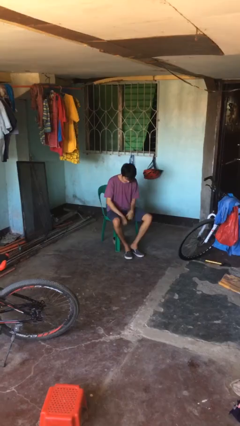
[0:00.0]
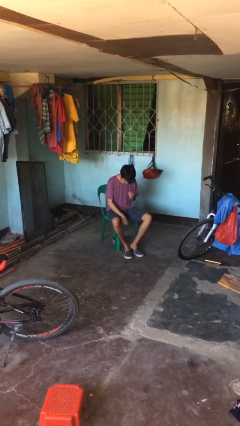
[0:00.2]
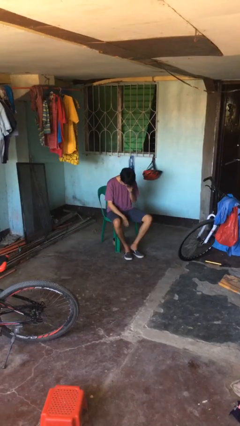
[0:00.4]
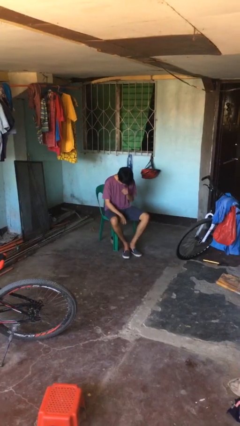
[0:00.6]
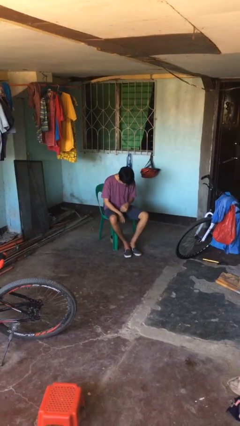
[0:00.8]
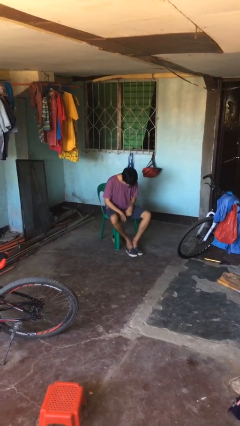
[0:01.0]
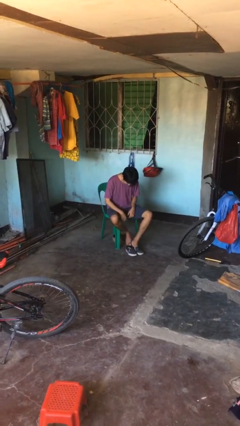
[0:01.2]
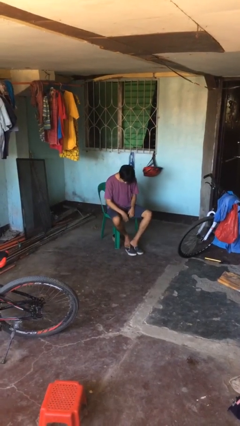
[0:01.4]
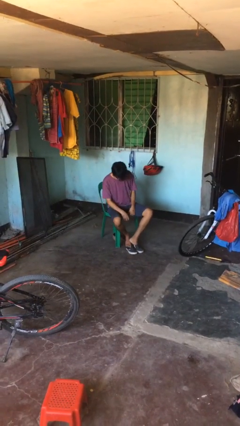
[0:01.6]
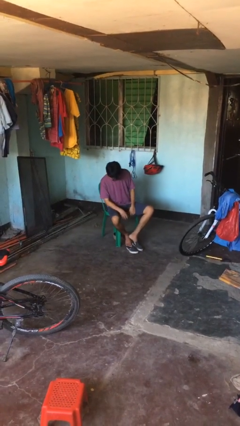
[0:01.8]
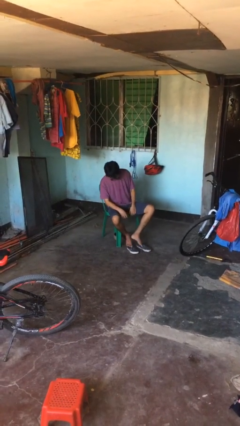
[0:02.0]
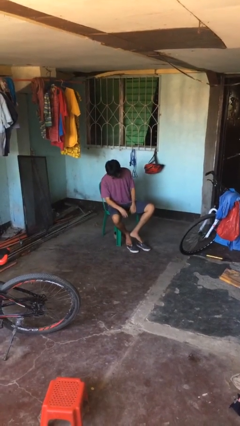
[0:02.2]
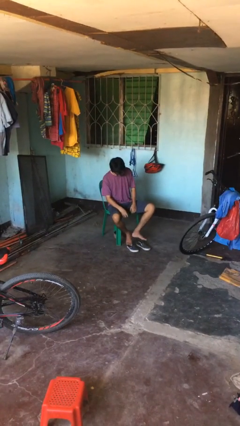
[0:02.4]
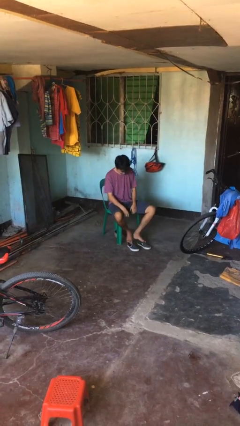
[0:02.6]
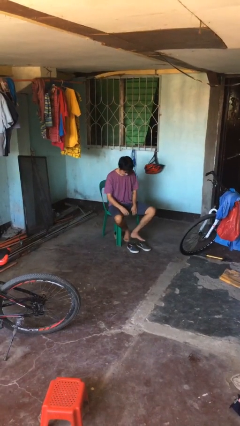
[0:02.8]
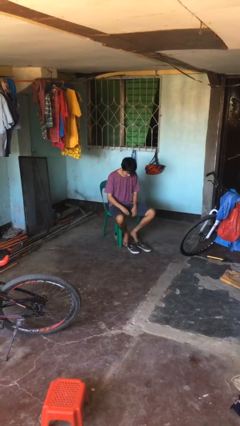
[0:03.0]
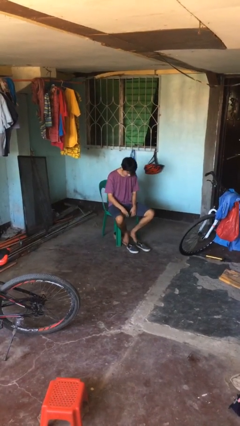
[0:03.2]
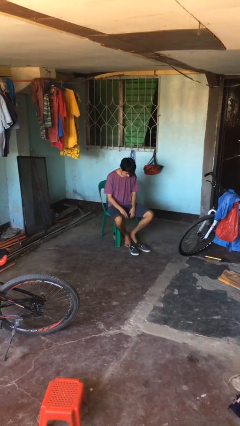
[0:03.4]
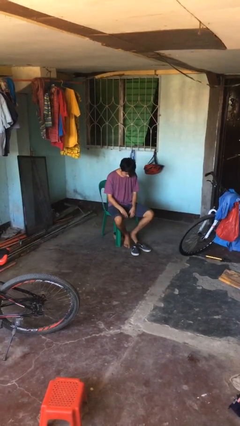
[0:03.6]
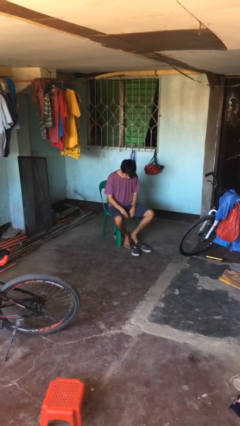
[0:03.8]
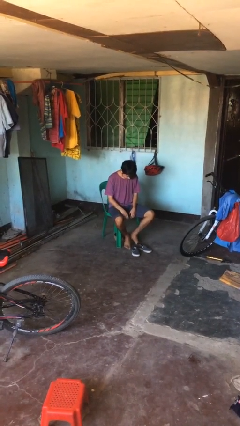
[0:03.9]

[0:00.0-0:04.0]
person takes off shoes

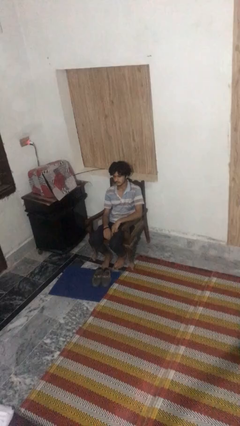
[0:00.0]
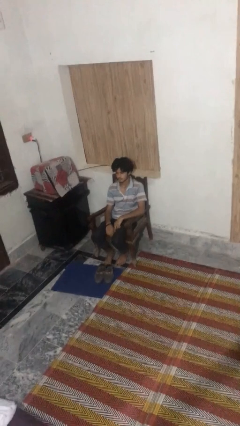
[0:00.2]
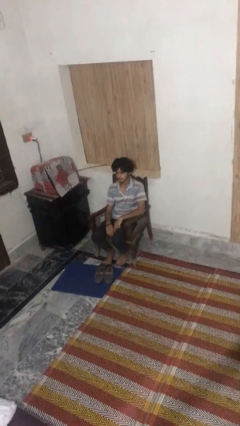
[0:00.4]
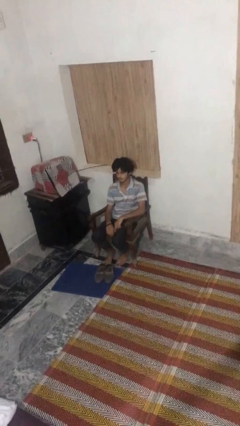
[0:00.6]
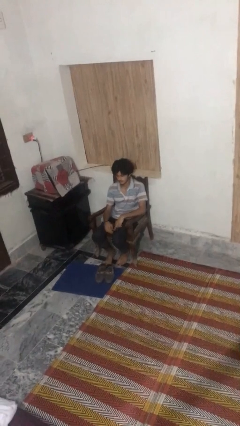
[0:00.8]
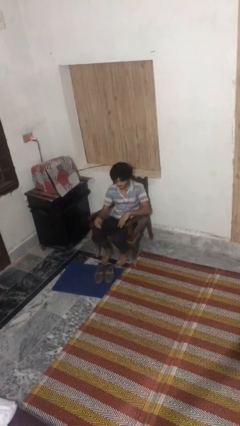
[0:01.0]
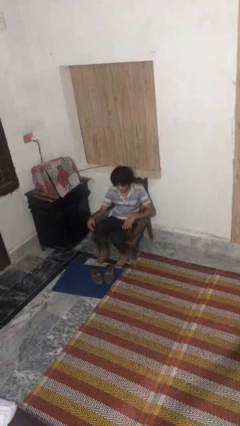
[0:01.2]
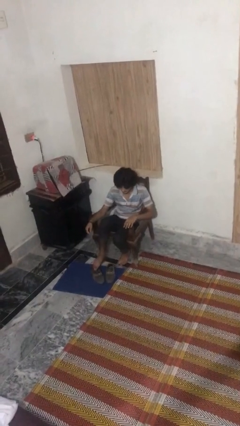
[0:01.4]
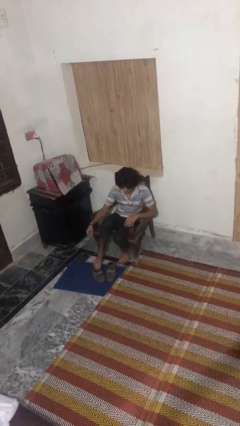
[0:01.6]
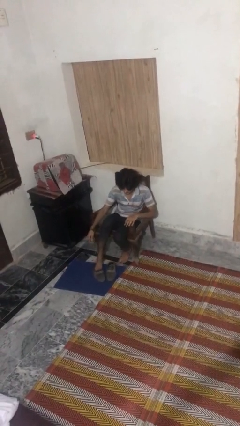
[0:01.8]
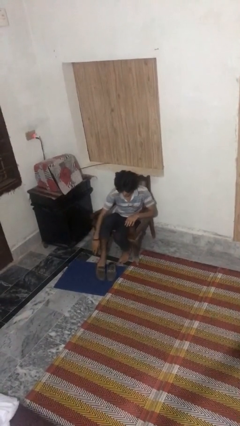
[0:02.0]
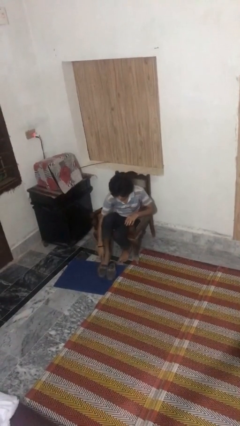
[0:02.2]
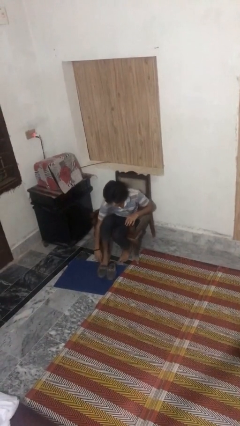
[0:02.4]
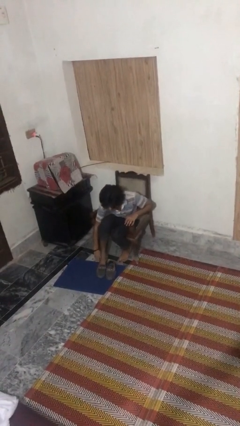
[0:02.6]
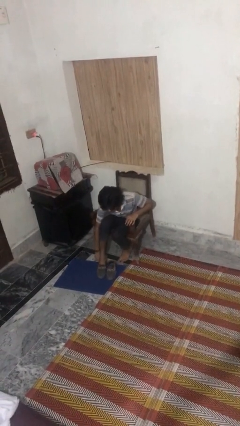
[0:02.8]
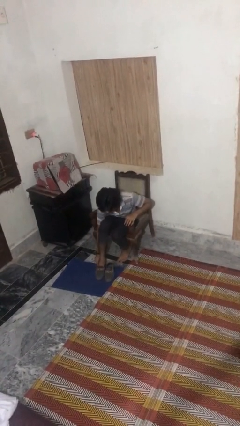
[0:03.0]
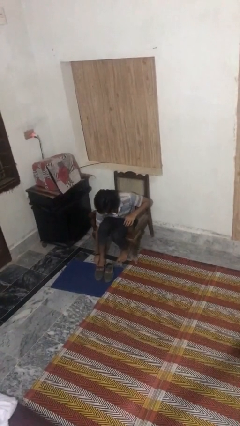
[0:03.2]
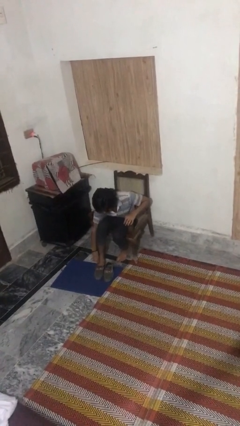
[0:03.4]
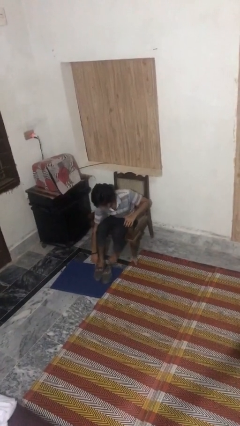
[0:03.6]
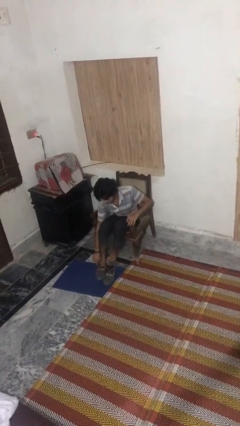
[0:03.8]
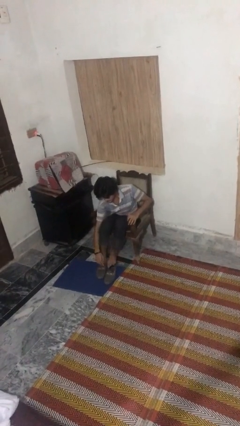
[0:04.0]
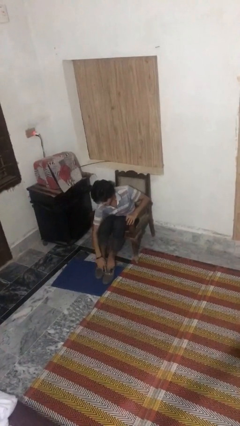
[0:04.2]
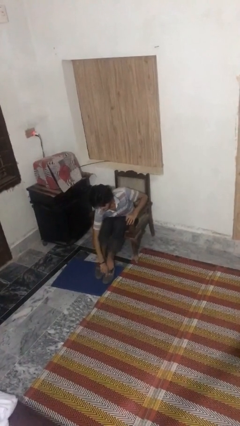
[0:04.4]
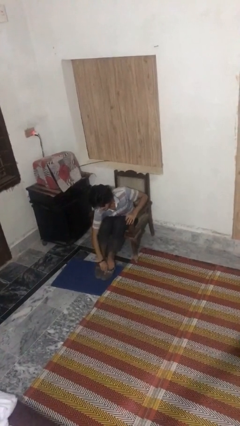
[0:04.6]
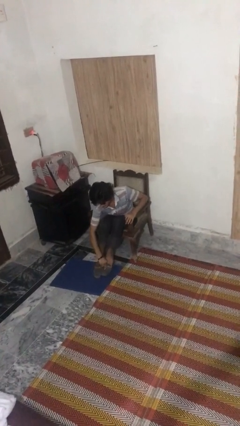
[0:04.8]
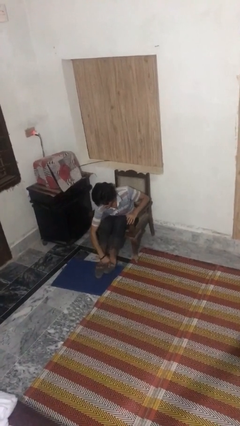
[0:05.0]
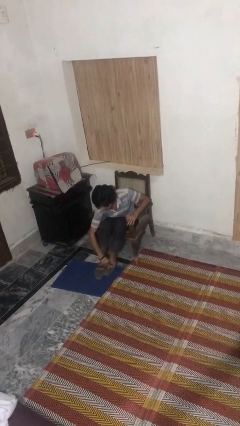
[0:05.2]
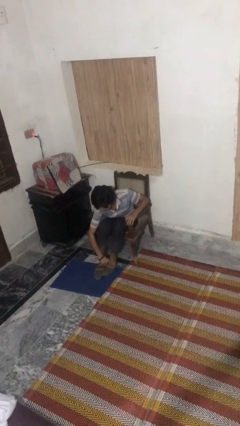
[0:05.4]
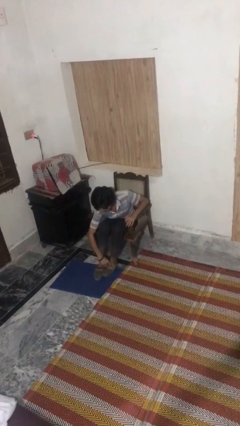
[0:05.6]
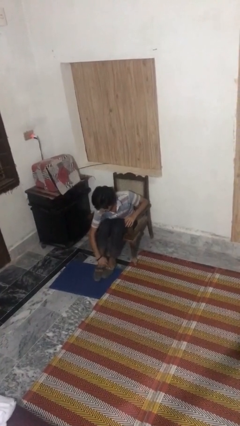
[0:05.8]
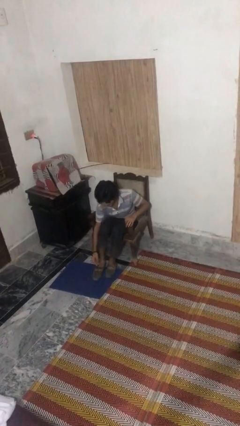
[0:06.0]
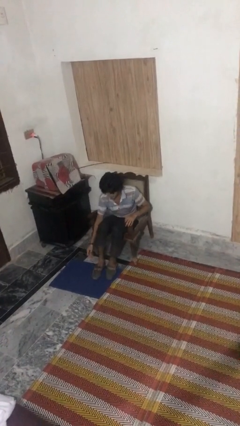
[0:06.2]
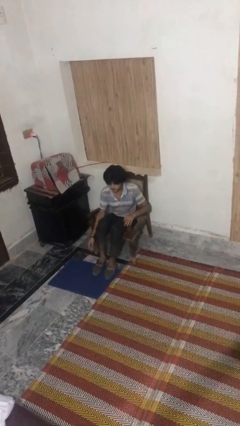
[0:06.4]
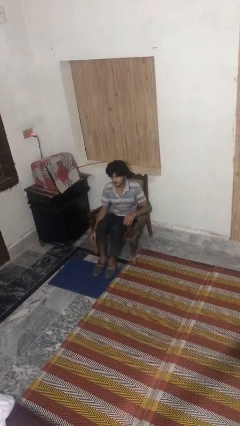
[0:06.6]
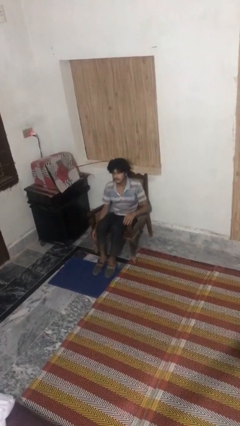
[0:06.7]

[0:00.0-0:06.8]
person puts on shoes

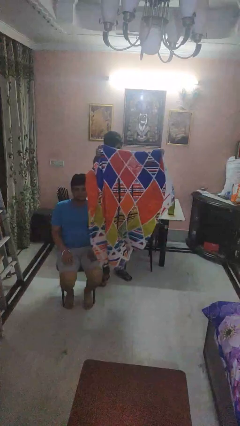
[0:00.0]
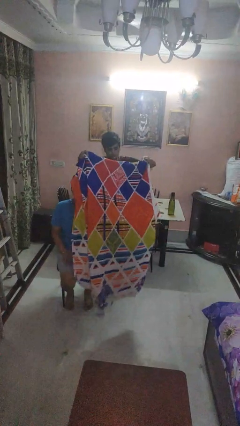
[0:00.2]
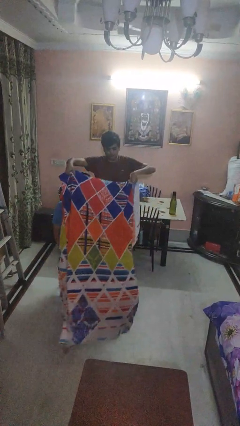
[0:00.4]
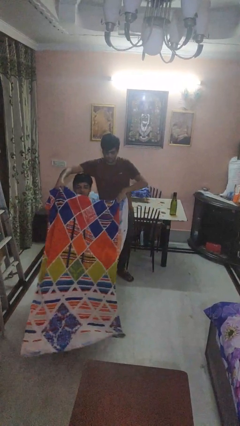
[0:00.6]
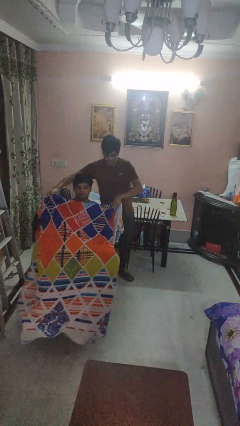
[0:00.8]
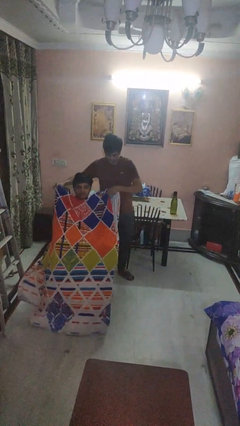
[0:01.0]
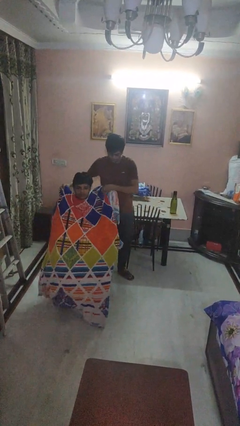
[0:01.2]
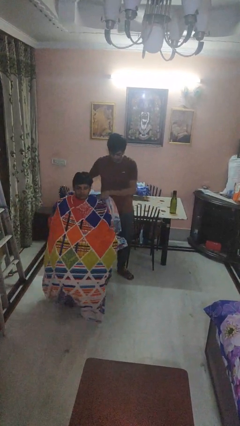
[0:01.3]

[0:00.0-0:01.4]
person covers friend with blanket

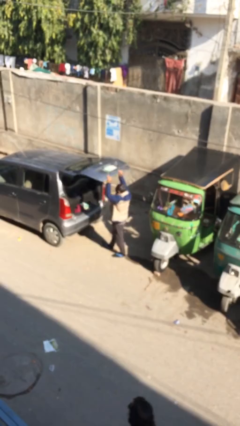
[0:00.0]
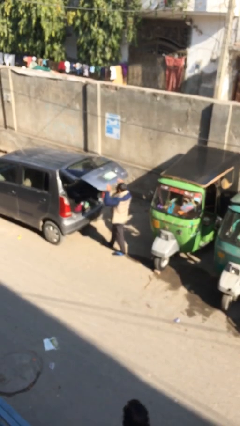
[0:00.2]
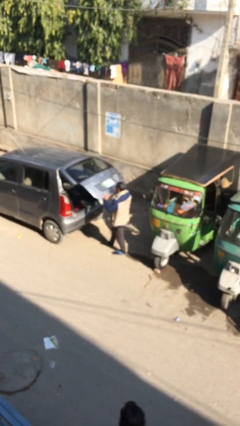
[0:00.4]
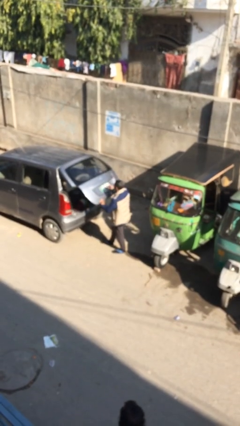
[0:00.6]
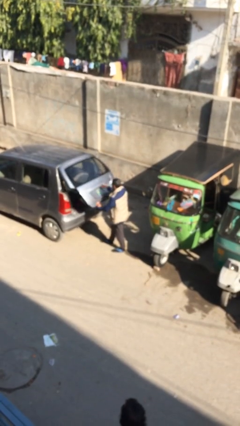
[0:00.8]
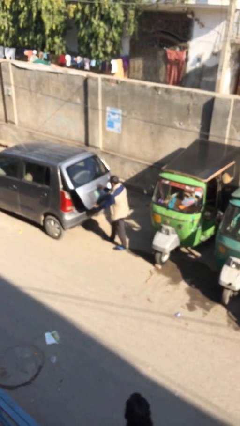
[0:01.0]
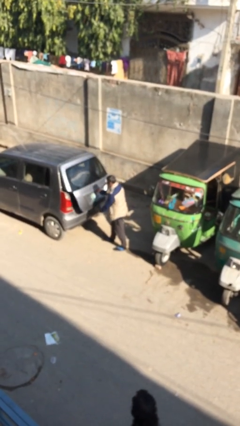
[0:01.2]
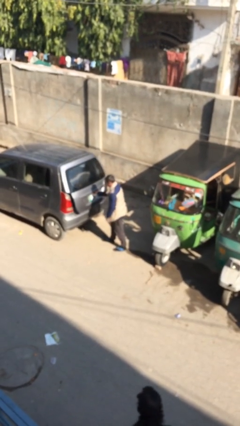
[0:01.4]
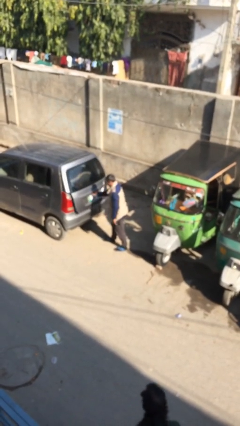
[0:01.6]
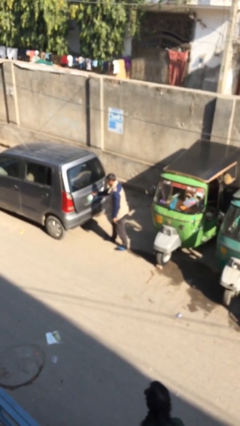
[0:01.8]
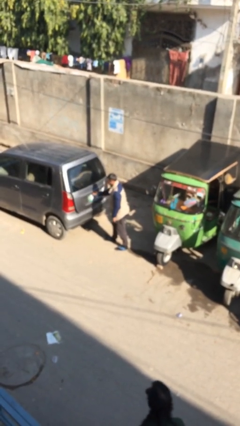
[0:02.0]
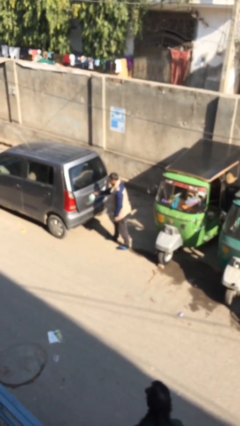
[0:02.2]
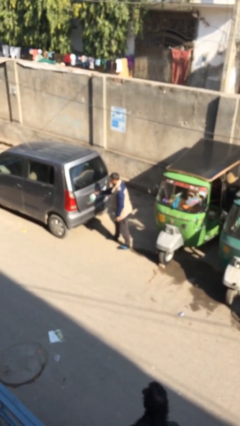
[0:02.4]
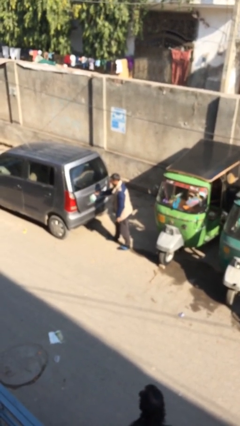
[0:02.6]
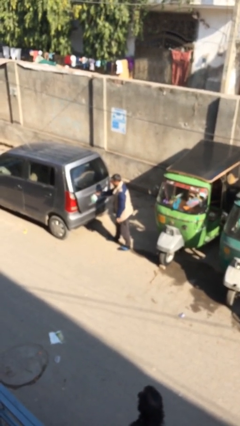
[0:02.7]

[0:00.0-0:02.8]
person closes car trunk

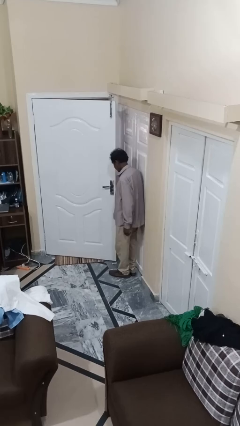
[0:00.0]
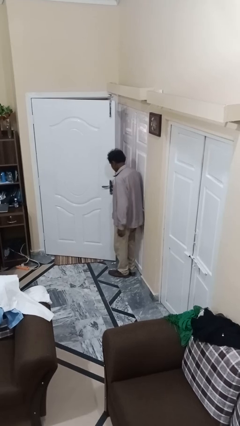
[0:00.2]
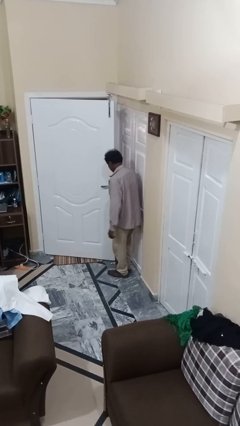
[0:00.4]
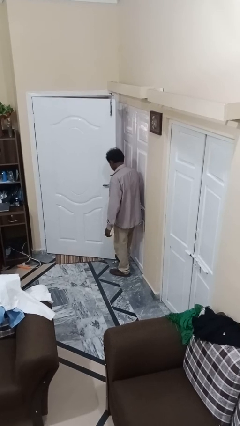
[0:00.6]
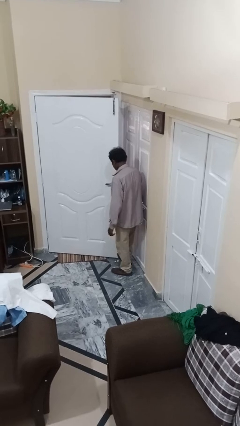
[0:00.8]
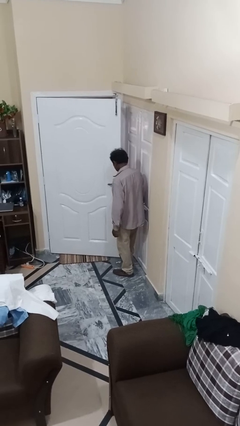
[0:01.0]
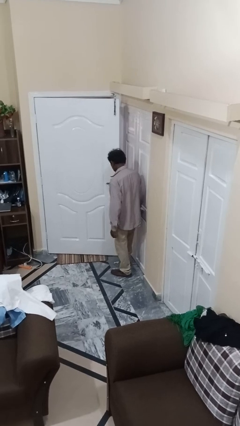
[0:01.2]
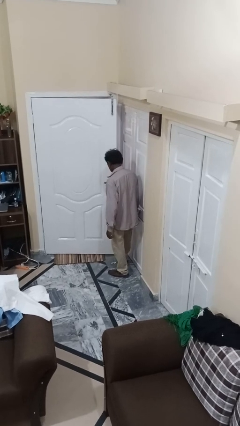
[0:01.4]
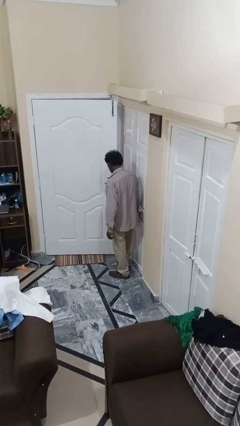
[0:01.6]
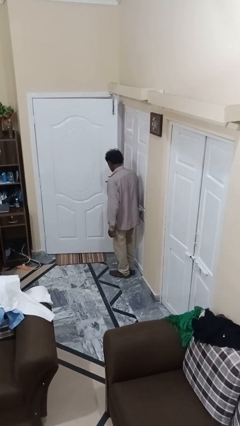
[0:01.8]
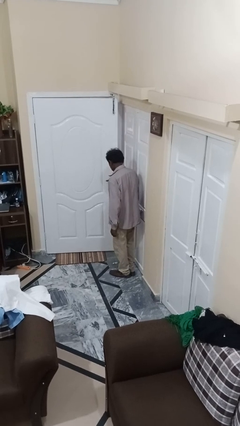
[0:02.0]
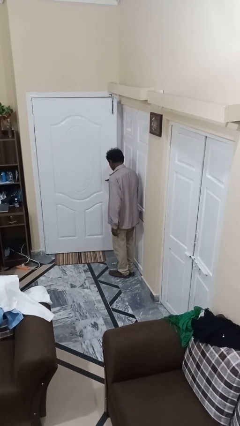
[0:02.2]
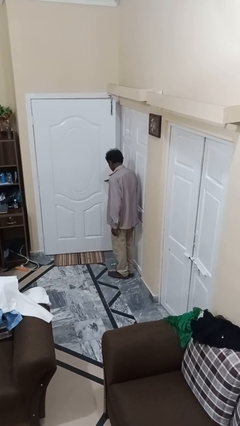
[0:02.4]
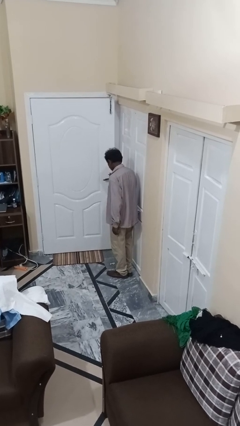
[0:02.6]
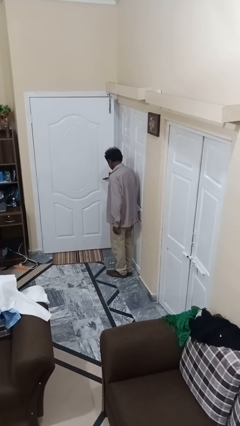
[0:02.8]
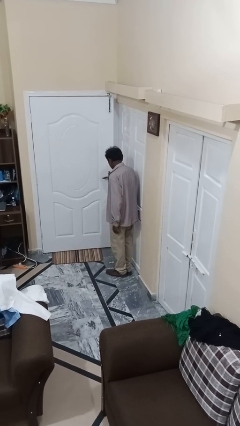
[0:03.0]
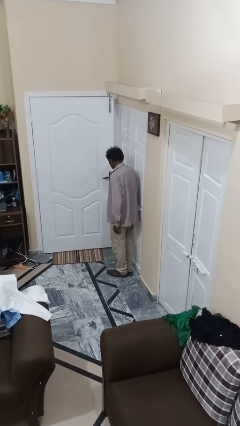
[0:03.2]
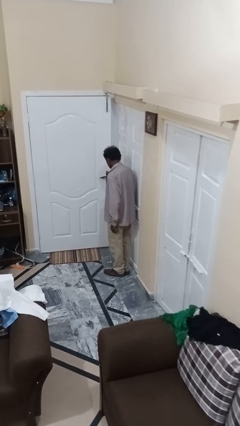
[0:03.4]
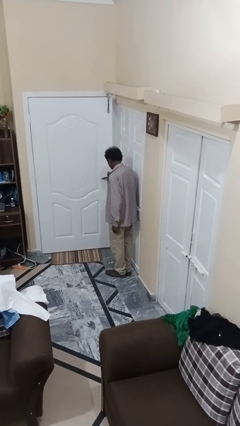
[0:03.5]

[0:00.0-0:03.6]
person closes door with foot
